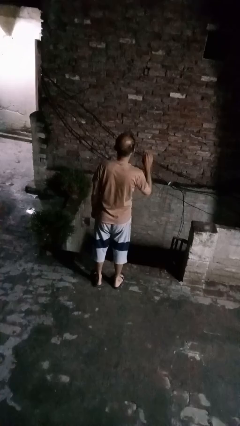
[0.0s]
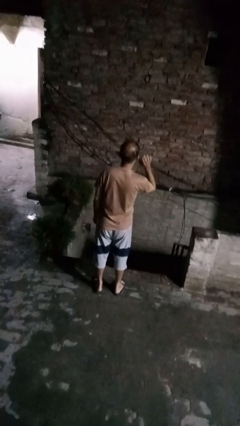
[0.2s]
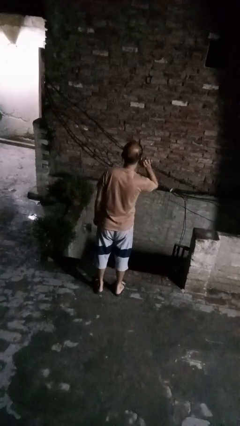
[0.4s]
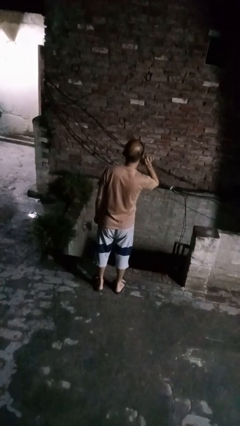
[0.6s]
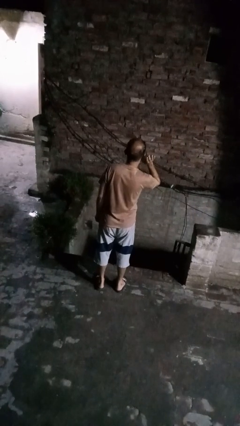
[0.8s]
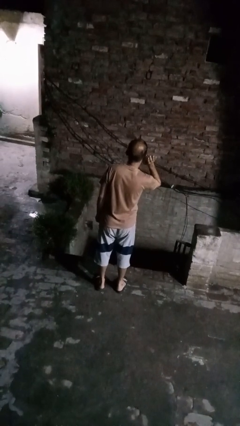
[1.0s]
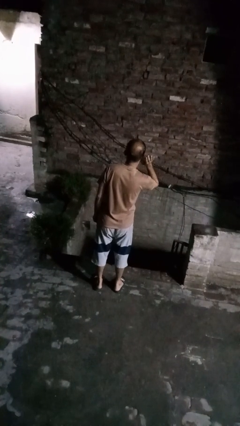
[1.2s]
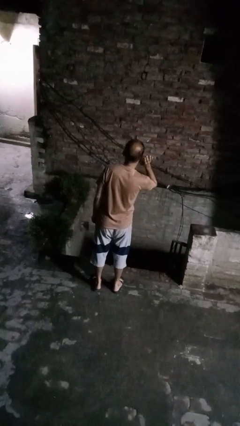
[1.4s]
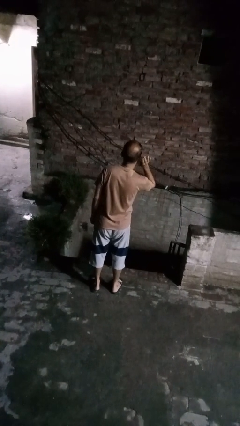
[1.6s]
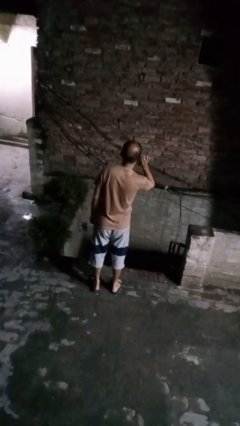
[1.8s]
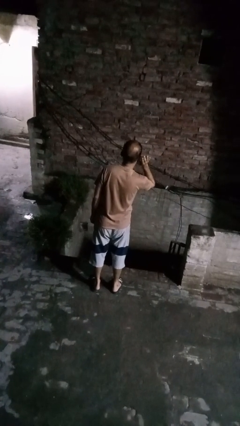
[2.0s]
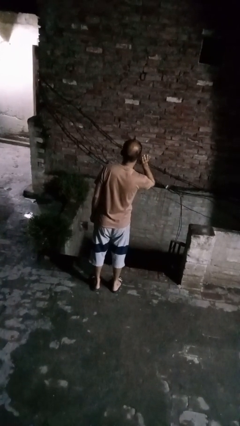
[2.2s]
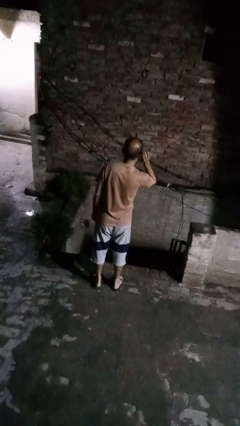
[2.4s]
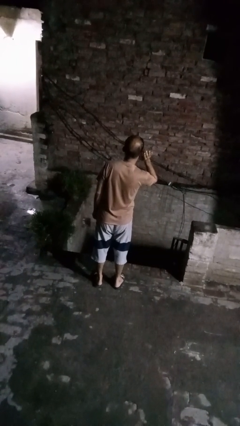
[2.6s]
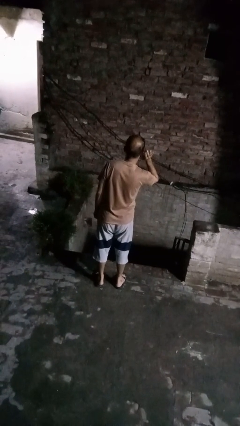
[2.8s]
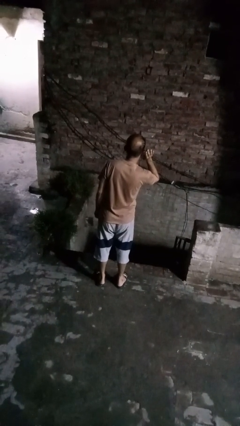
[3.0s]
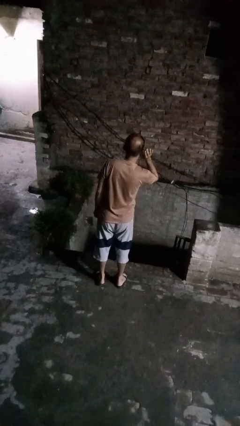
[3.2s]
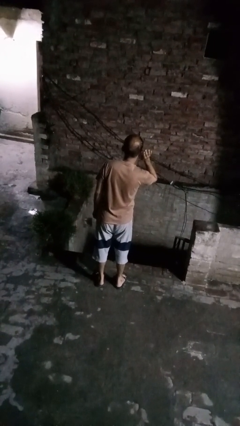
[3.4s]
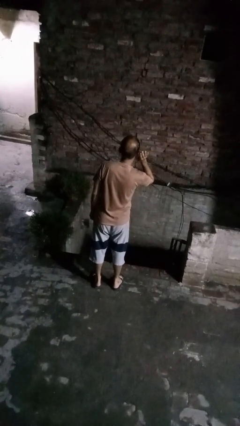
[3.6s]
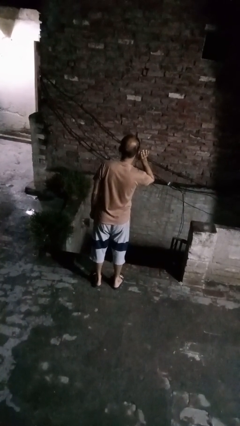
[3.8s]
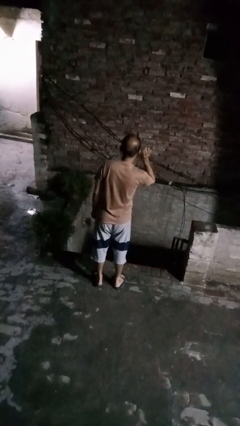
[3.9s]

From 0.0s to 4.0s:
person gestures listen closely

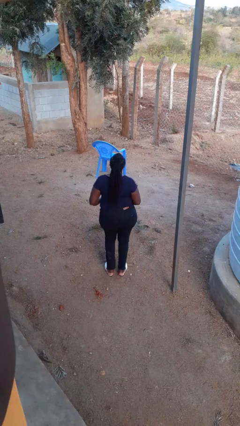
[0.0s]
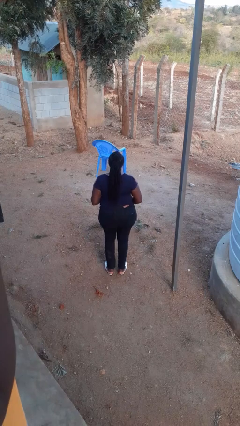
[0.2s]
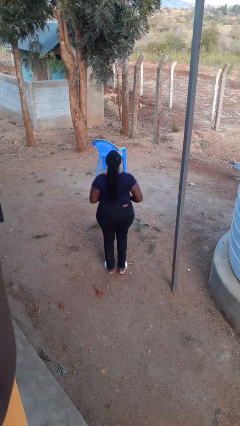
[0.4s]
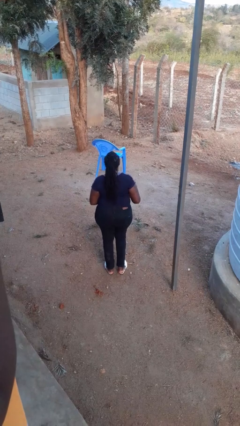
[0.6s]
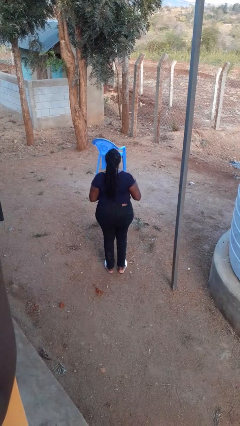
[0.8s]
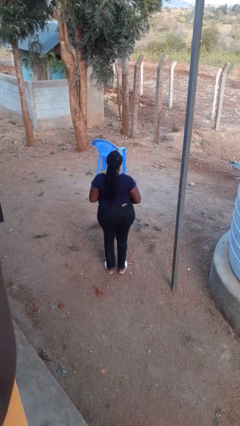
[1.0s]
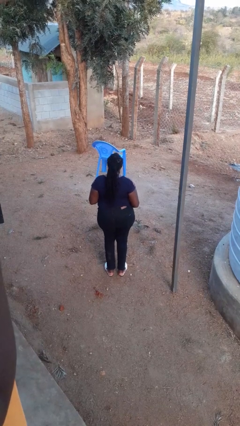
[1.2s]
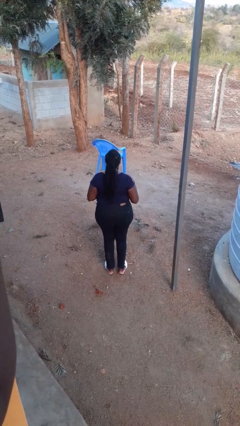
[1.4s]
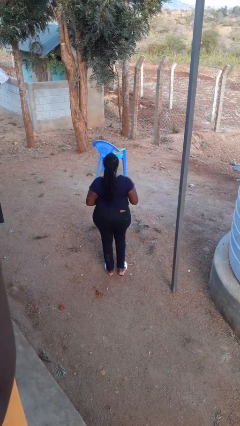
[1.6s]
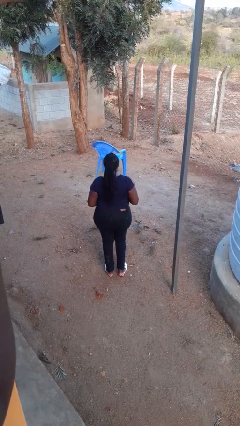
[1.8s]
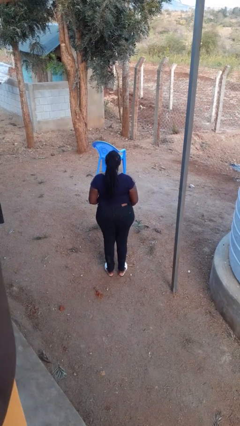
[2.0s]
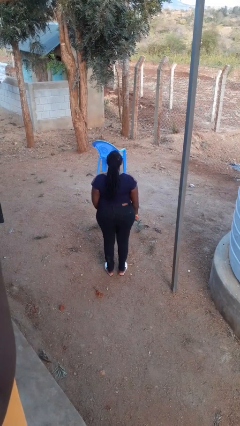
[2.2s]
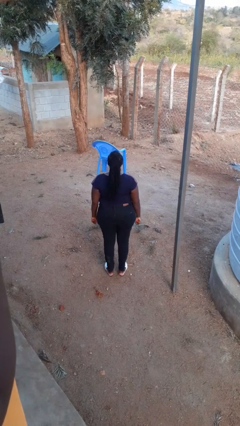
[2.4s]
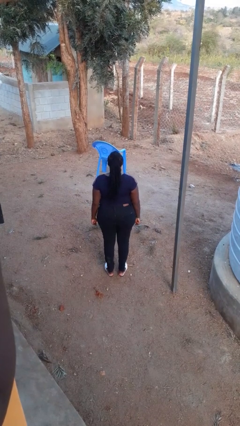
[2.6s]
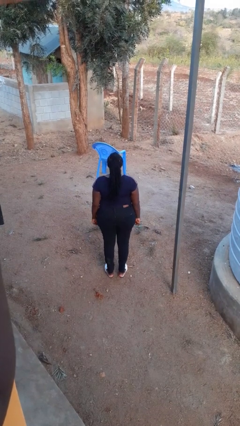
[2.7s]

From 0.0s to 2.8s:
person wiggles hips

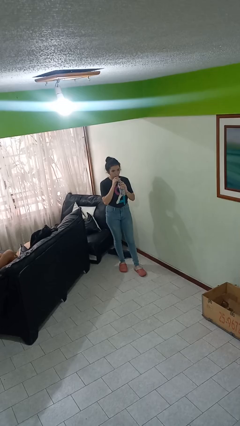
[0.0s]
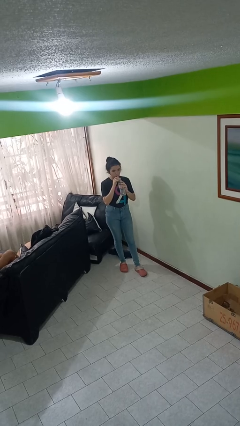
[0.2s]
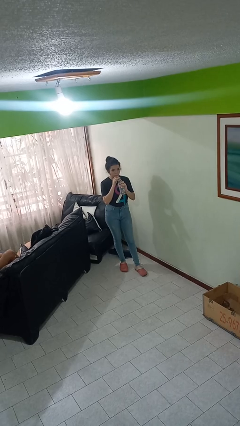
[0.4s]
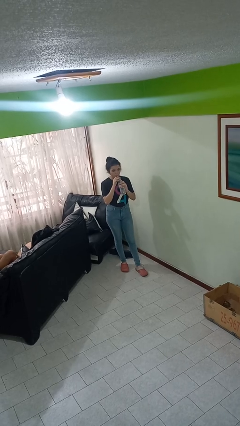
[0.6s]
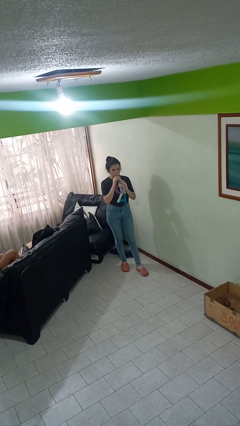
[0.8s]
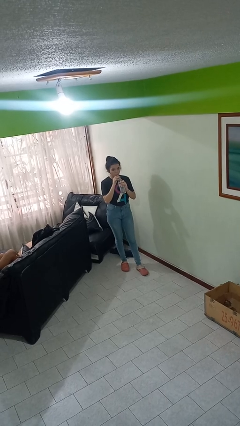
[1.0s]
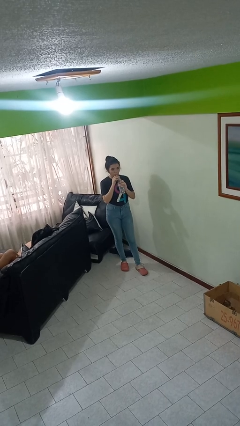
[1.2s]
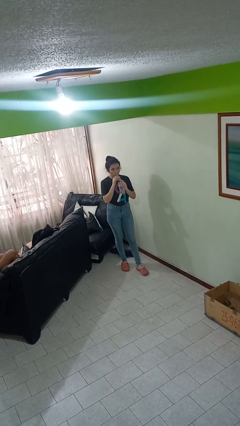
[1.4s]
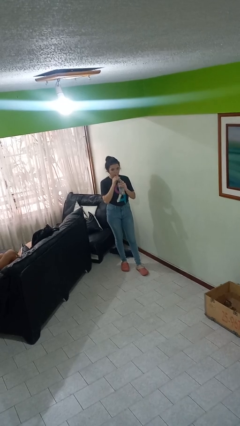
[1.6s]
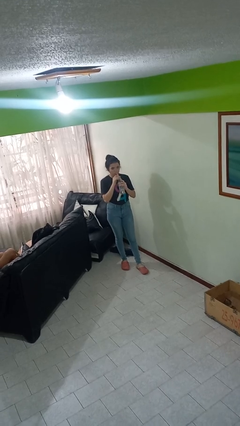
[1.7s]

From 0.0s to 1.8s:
person drinks from straw

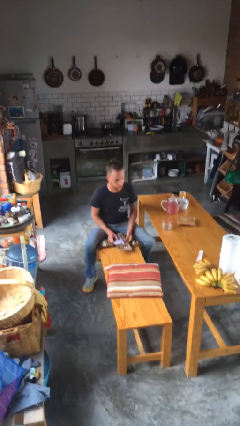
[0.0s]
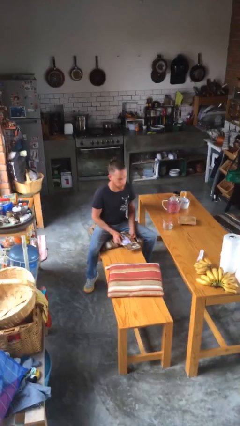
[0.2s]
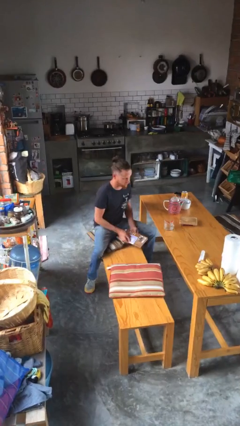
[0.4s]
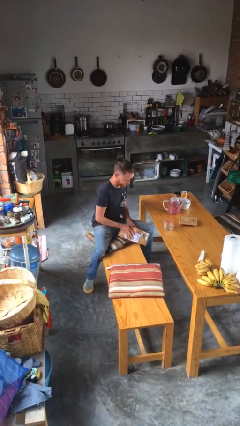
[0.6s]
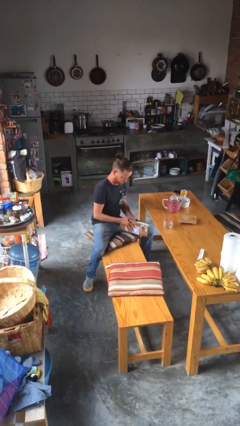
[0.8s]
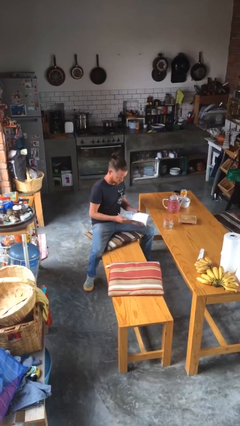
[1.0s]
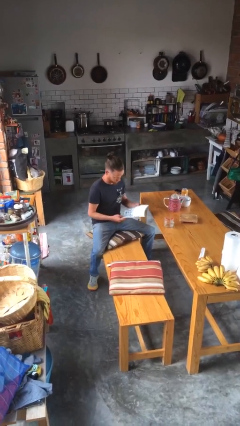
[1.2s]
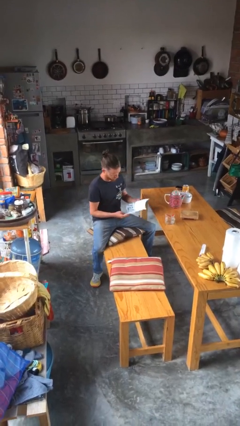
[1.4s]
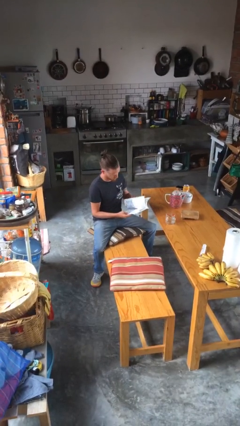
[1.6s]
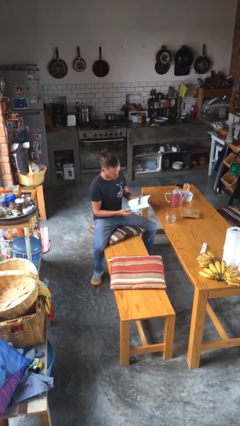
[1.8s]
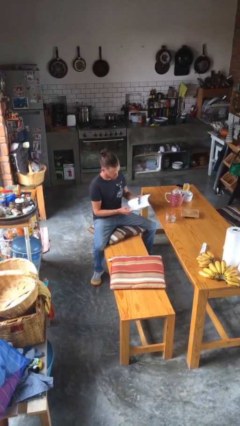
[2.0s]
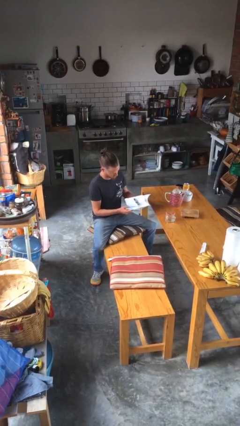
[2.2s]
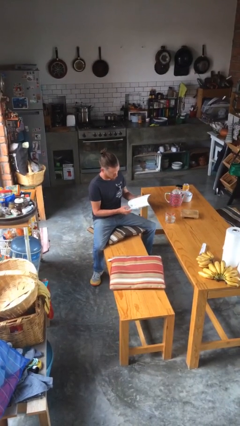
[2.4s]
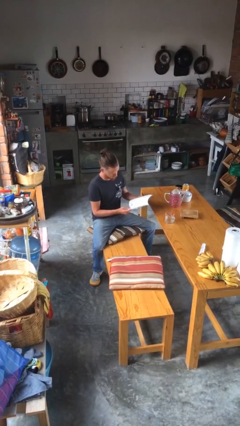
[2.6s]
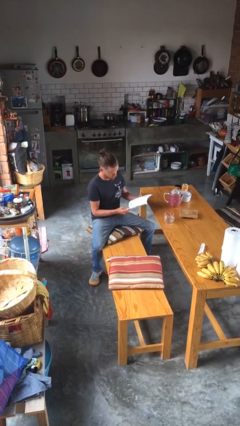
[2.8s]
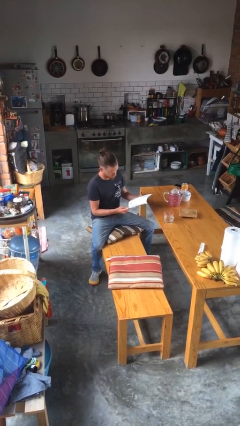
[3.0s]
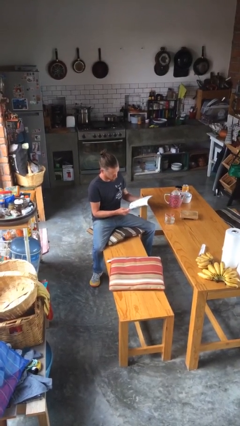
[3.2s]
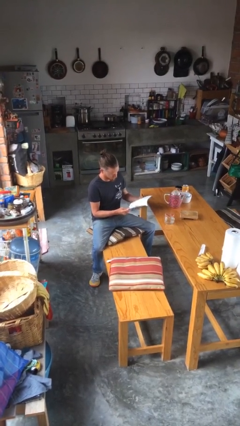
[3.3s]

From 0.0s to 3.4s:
person reads magazine

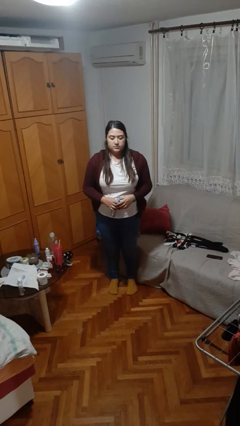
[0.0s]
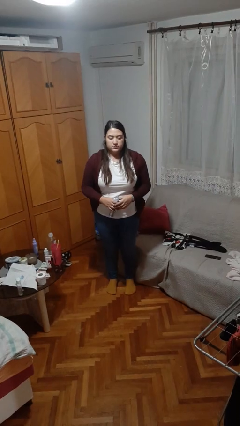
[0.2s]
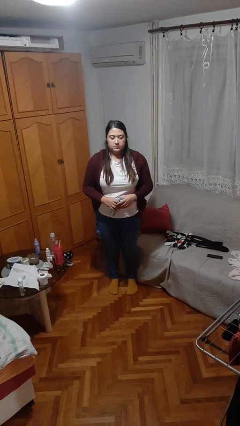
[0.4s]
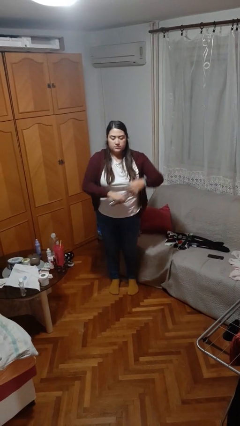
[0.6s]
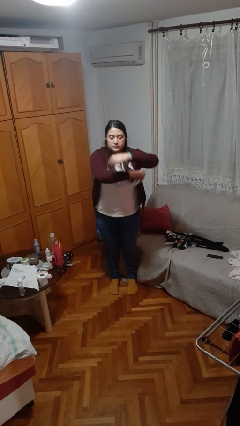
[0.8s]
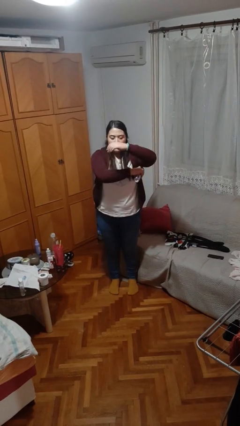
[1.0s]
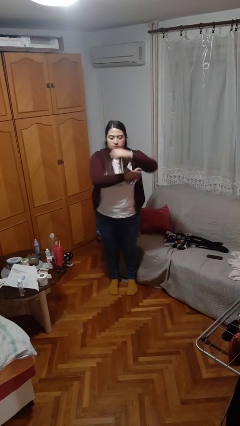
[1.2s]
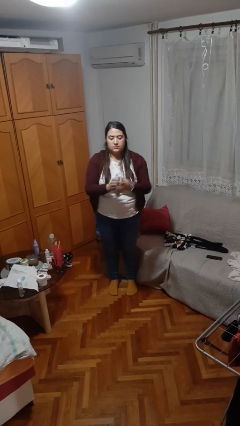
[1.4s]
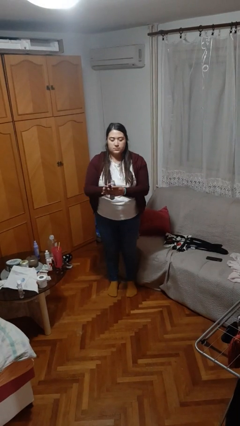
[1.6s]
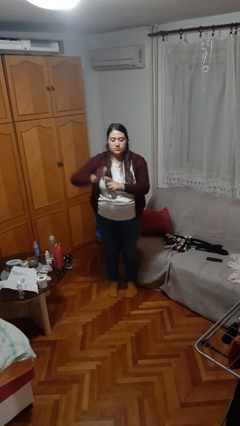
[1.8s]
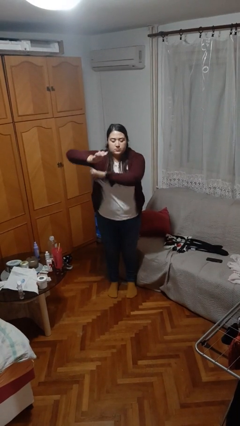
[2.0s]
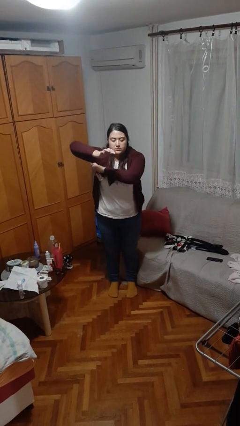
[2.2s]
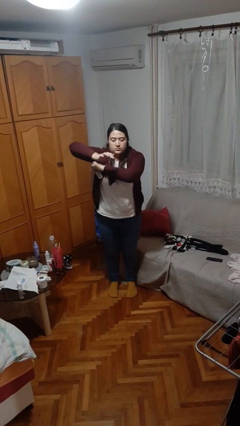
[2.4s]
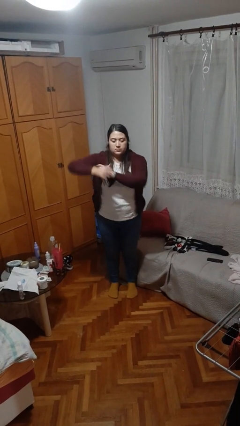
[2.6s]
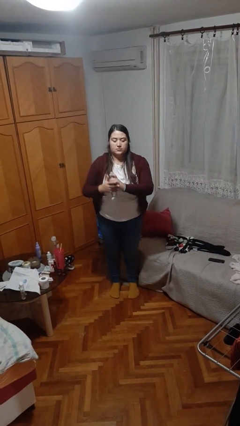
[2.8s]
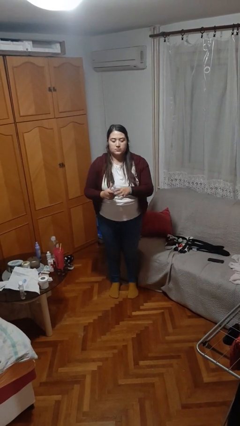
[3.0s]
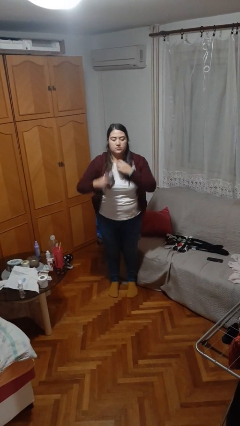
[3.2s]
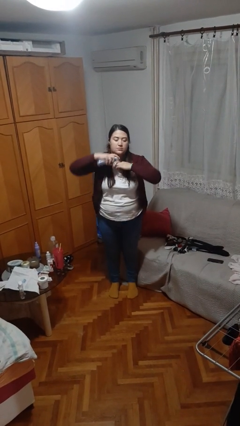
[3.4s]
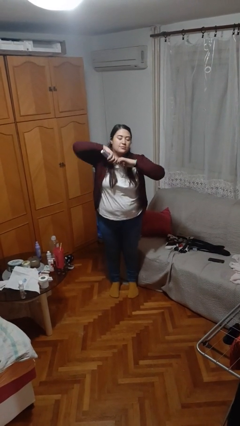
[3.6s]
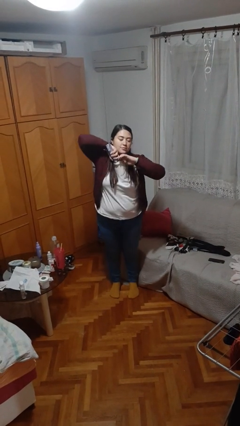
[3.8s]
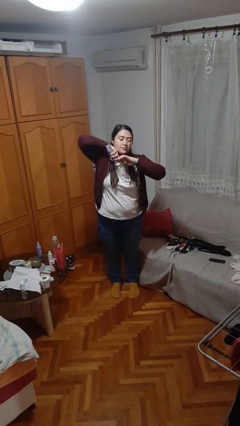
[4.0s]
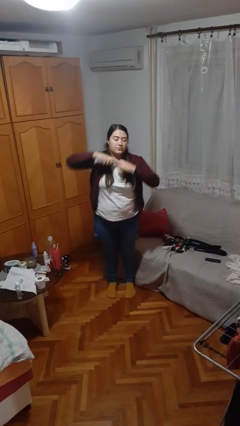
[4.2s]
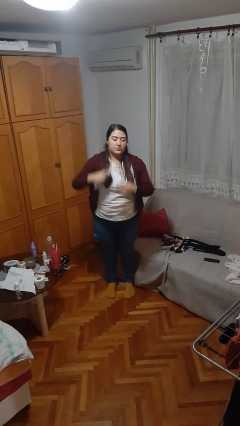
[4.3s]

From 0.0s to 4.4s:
person applies deodorant

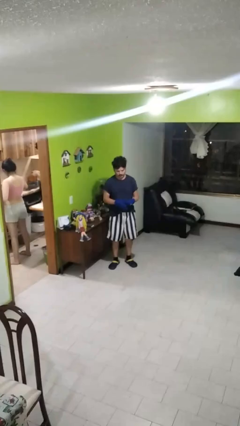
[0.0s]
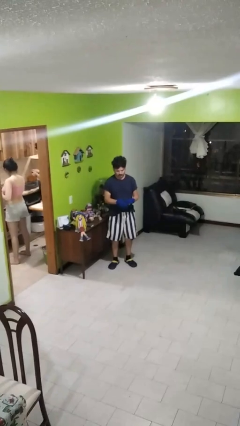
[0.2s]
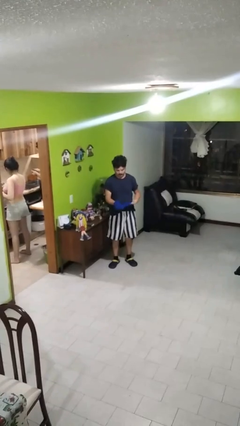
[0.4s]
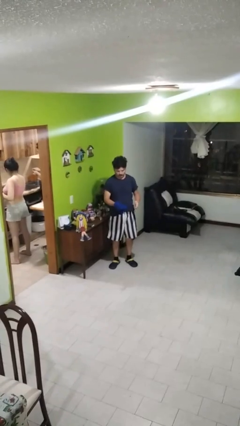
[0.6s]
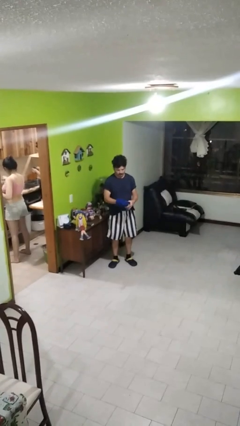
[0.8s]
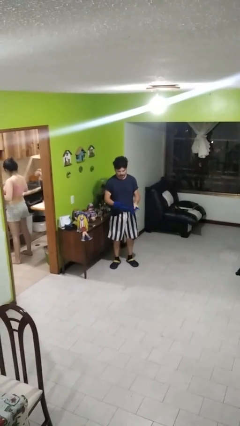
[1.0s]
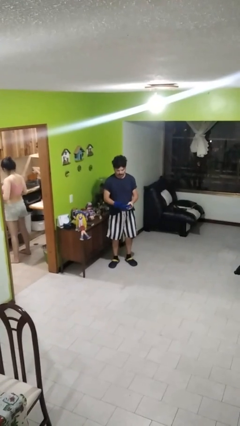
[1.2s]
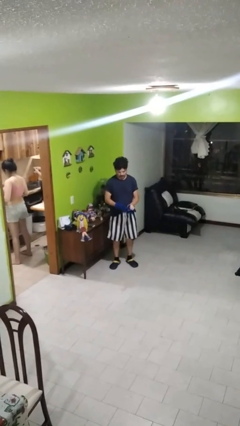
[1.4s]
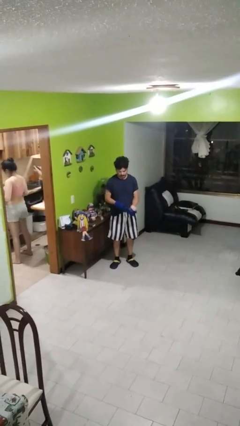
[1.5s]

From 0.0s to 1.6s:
person takes off gloves
